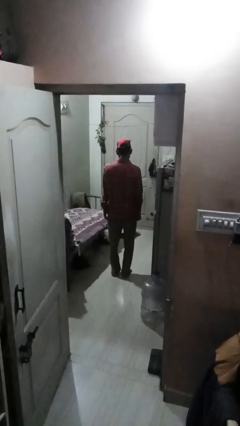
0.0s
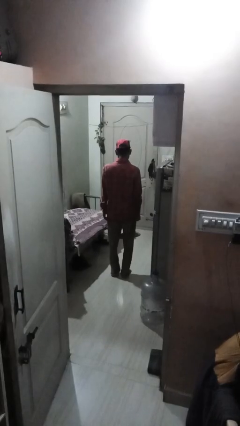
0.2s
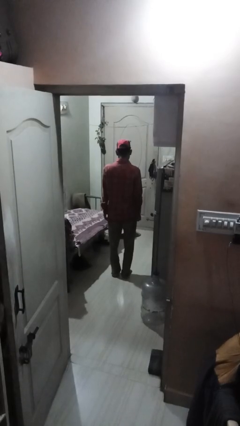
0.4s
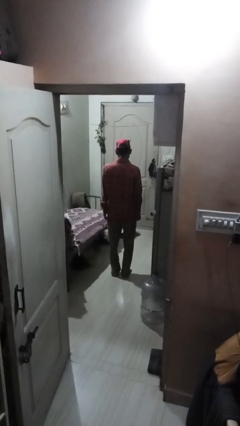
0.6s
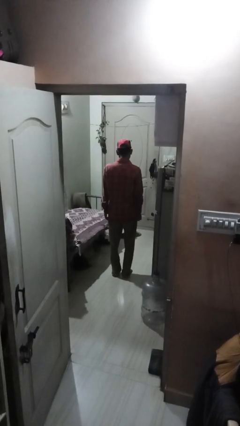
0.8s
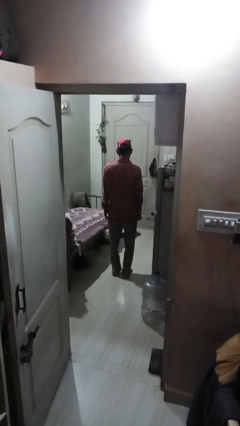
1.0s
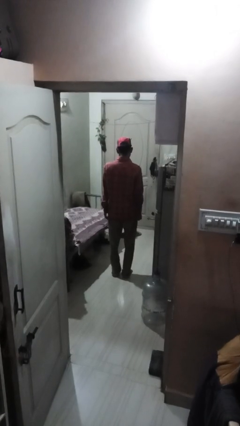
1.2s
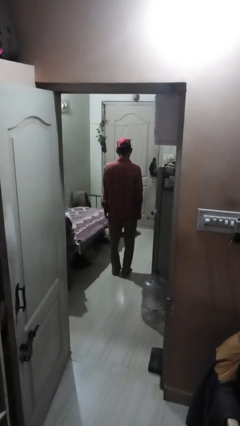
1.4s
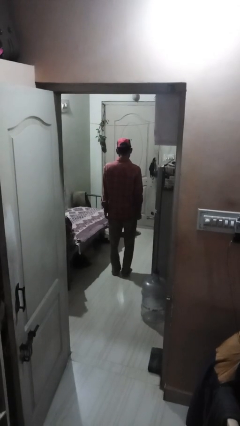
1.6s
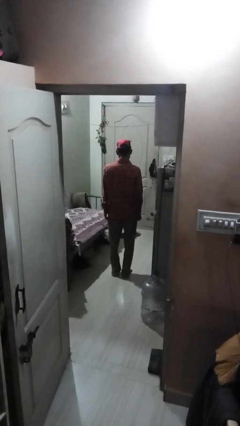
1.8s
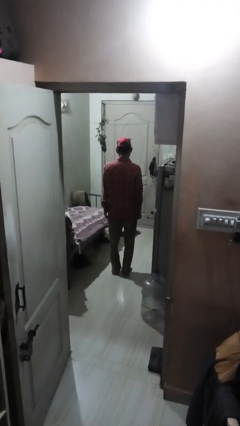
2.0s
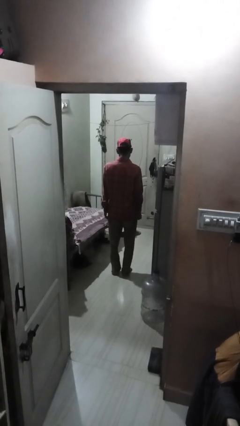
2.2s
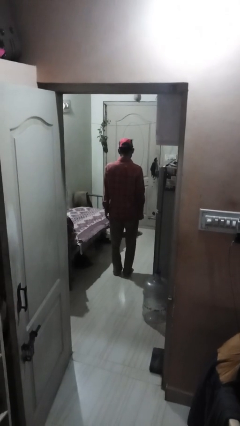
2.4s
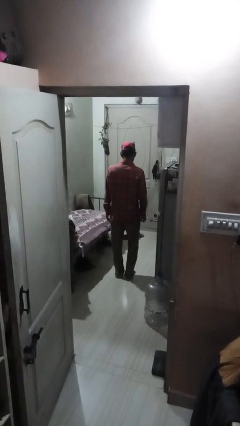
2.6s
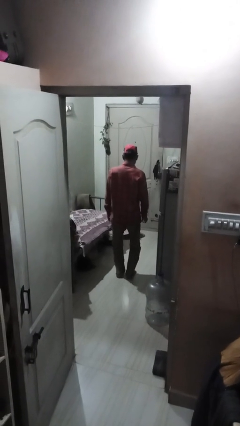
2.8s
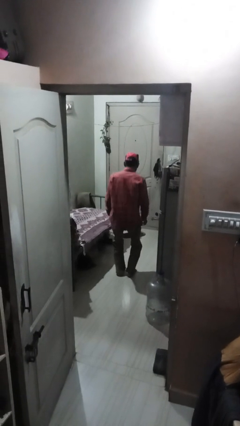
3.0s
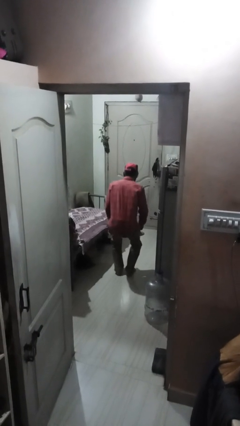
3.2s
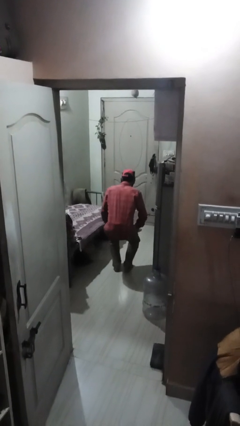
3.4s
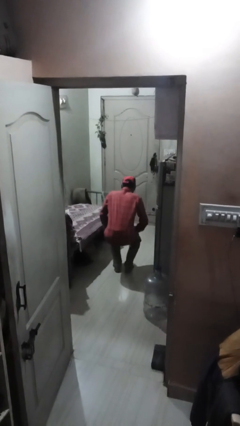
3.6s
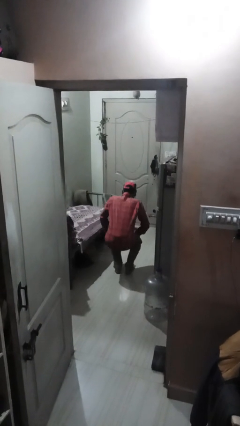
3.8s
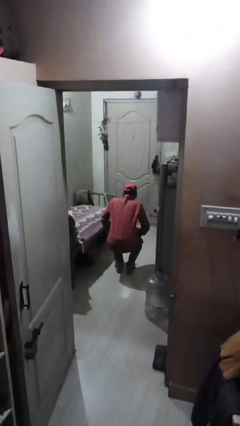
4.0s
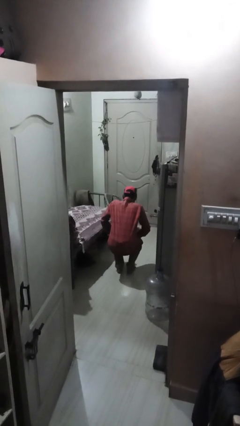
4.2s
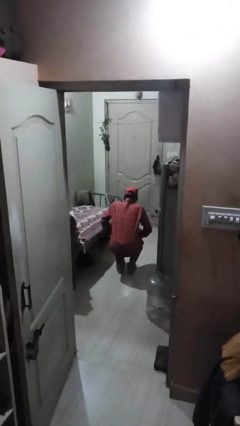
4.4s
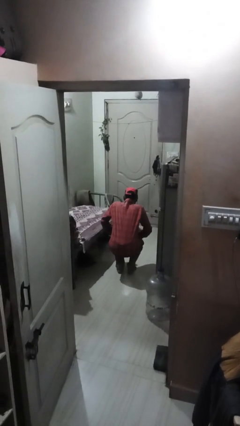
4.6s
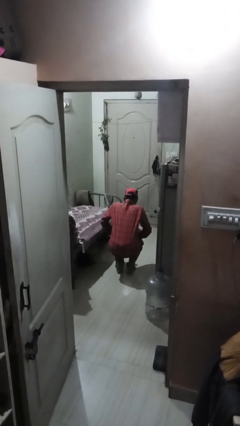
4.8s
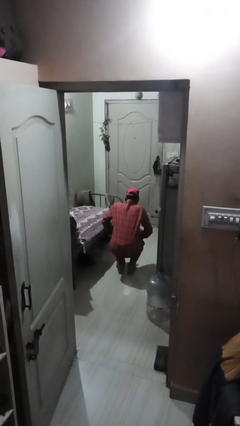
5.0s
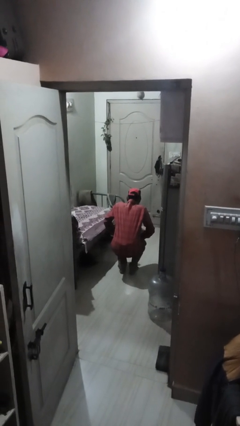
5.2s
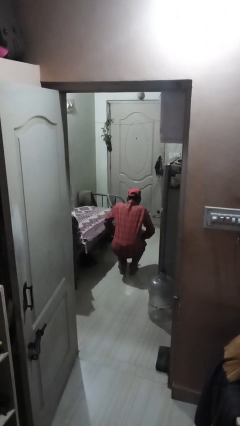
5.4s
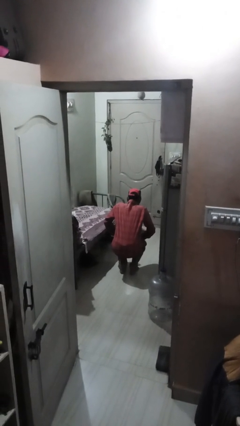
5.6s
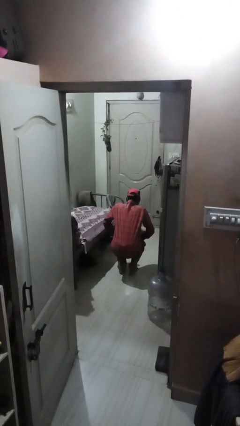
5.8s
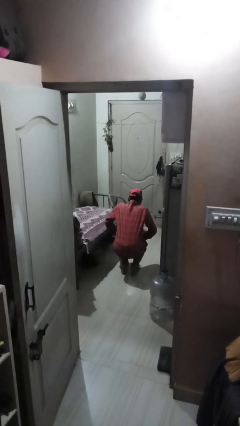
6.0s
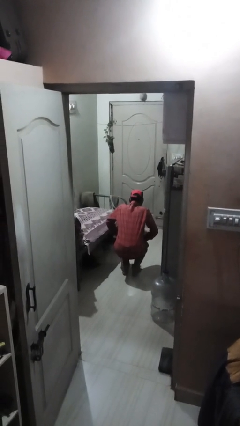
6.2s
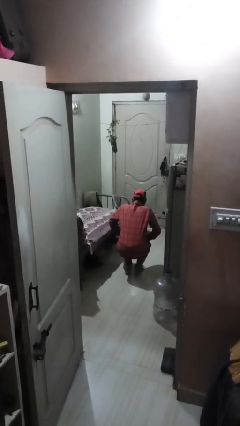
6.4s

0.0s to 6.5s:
person squats

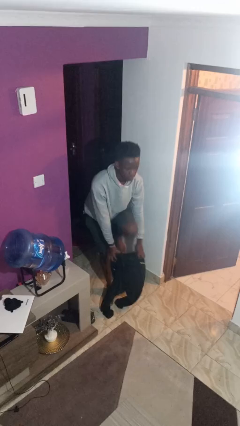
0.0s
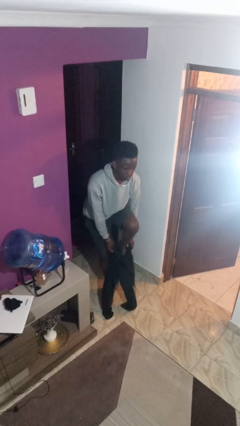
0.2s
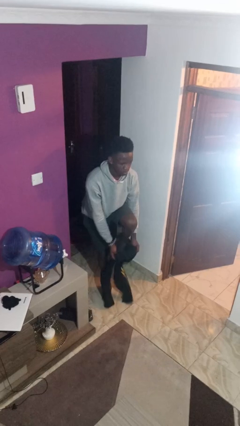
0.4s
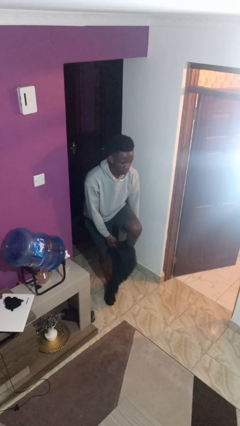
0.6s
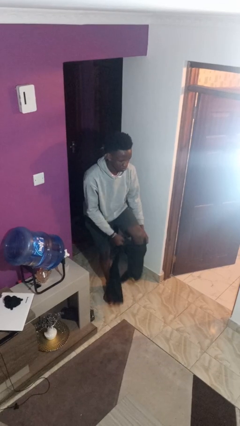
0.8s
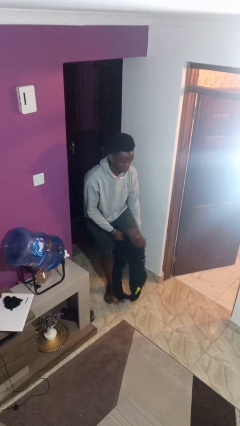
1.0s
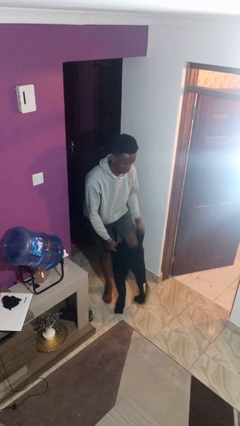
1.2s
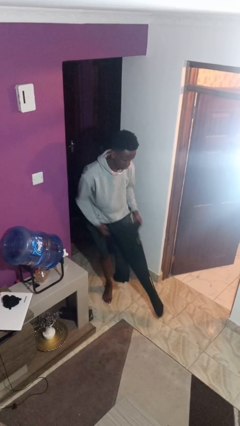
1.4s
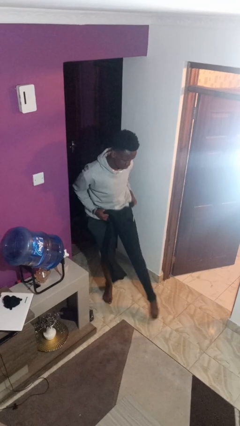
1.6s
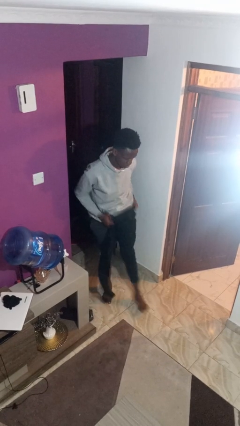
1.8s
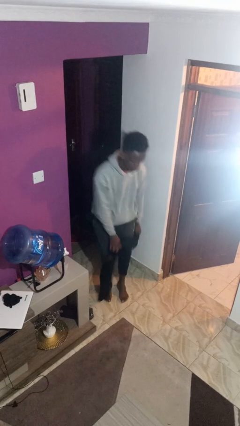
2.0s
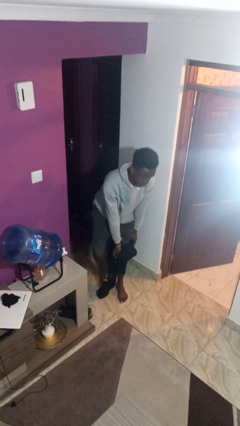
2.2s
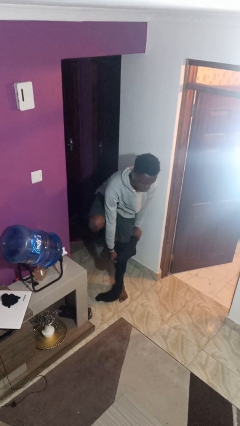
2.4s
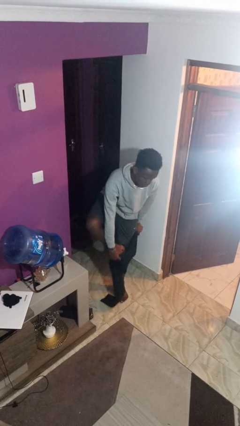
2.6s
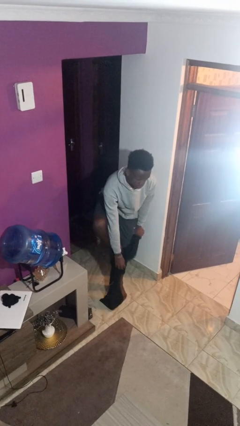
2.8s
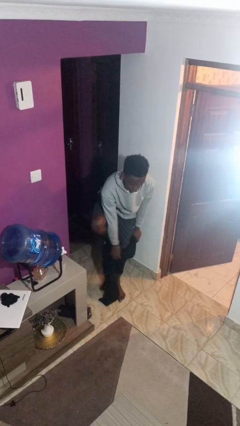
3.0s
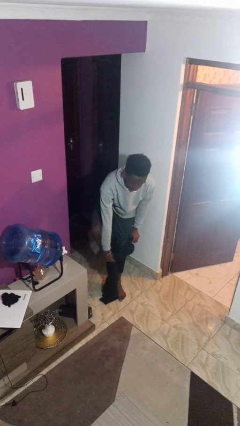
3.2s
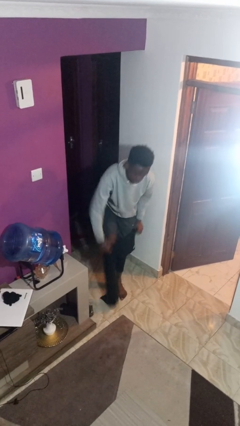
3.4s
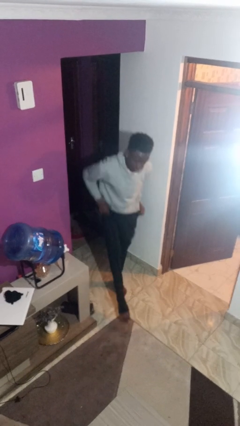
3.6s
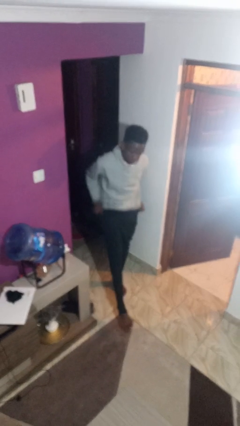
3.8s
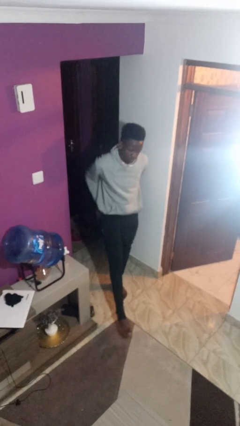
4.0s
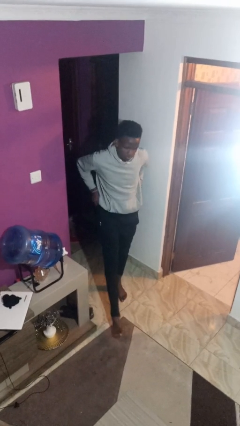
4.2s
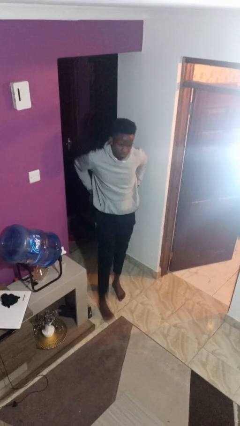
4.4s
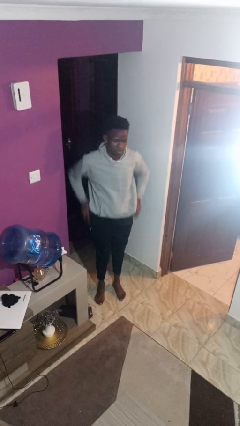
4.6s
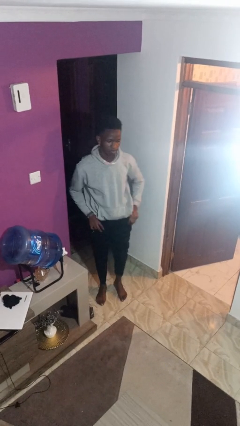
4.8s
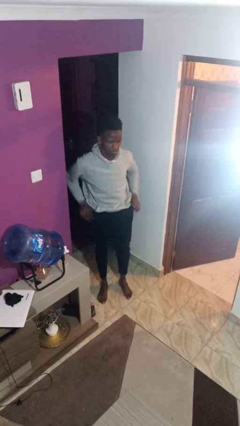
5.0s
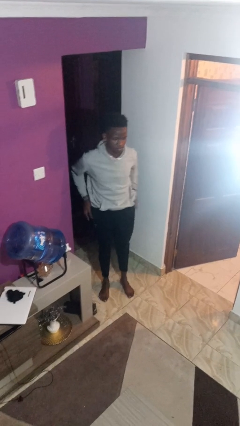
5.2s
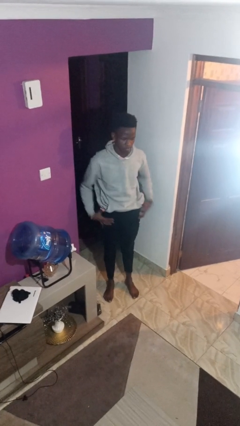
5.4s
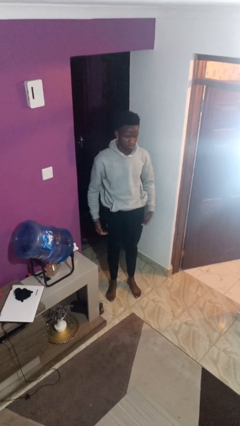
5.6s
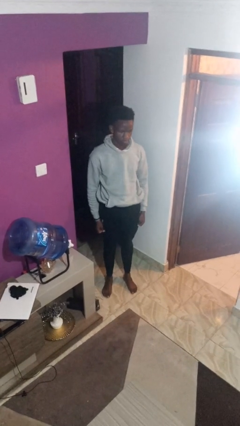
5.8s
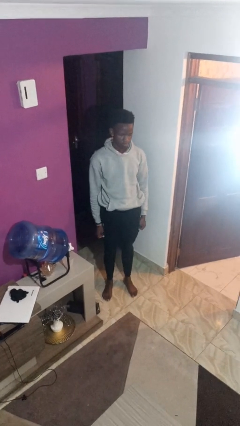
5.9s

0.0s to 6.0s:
person puts on pants

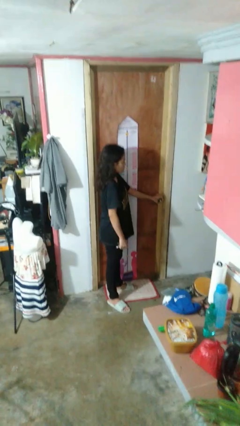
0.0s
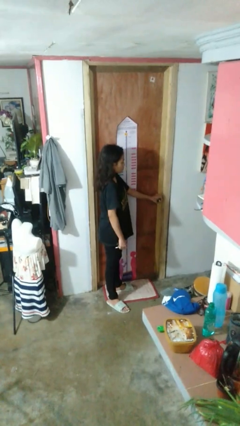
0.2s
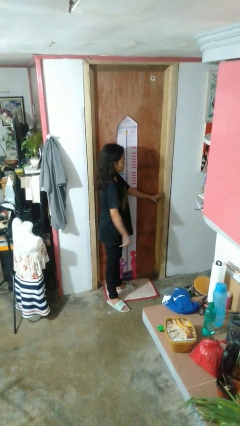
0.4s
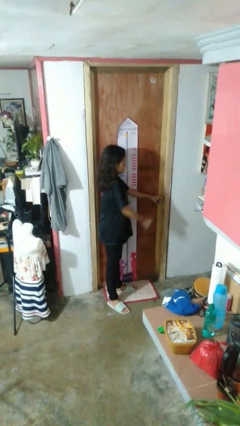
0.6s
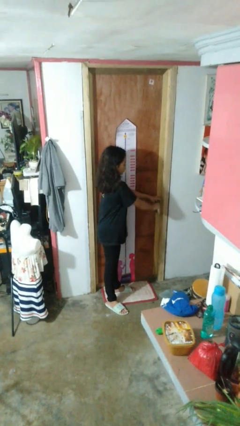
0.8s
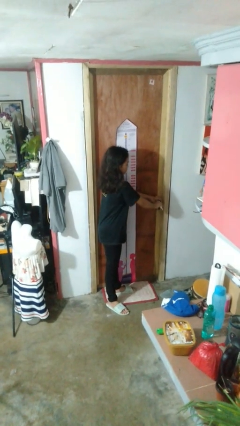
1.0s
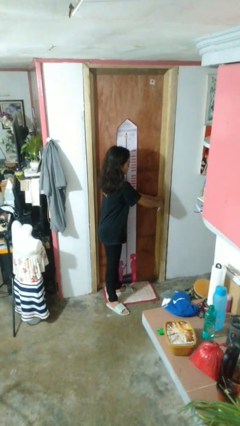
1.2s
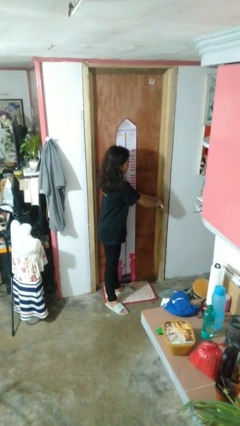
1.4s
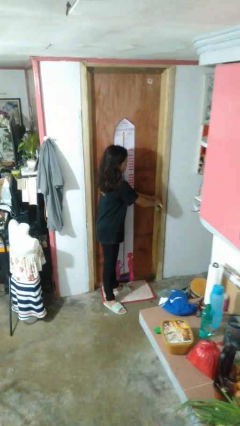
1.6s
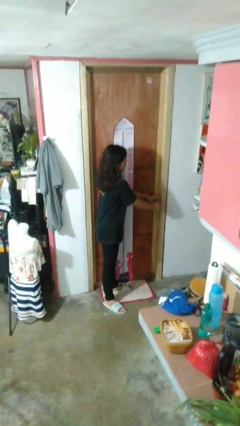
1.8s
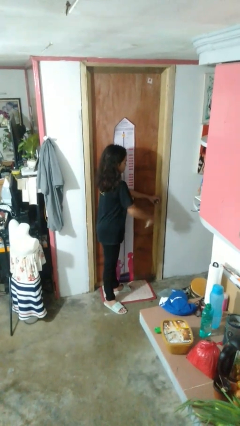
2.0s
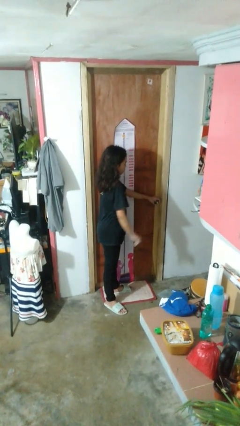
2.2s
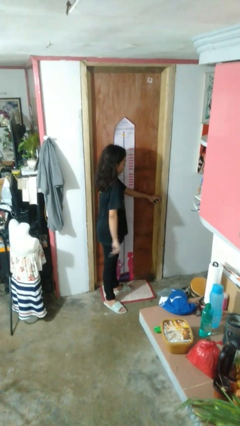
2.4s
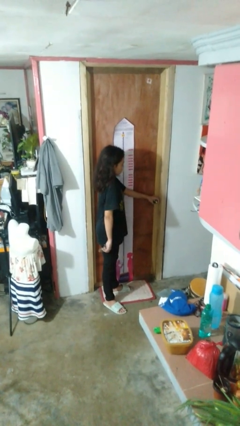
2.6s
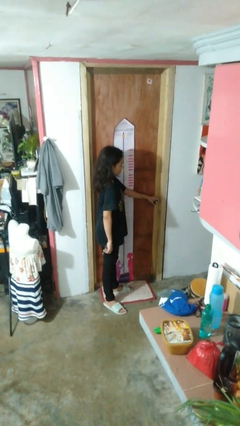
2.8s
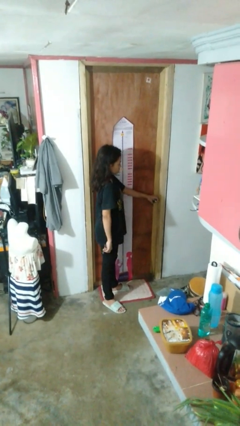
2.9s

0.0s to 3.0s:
person locks door with keys

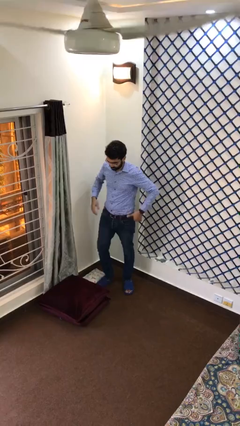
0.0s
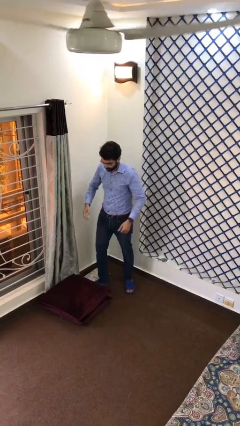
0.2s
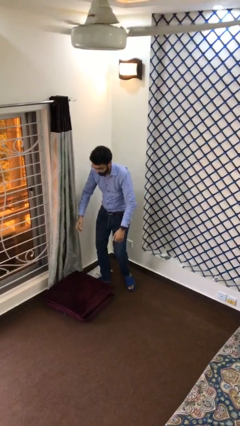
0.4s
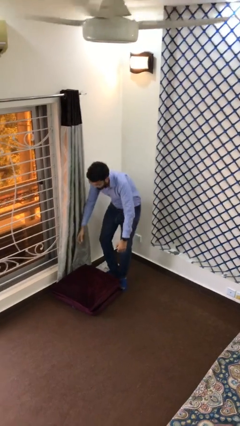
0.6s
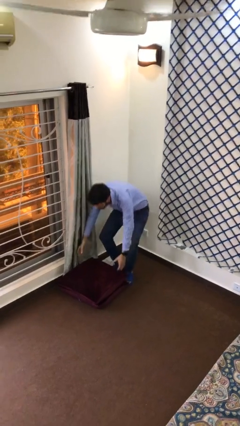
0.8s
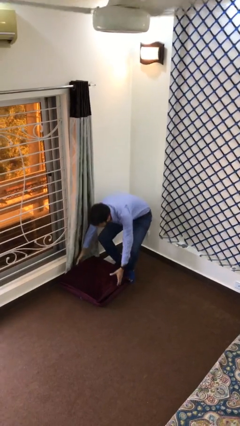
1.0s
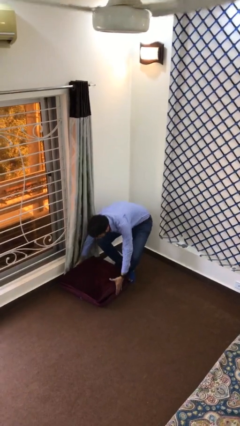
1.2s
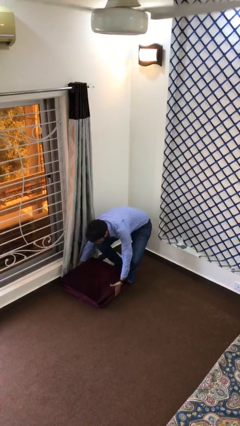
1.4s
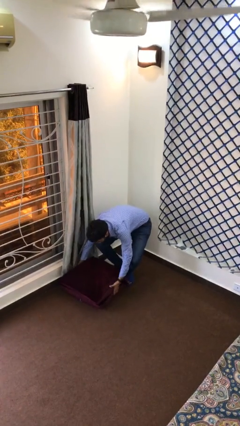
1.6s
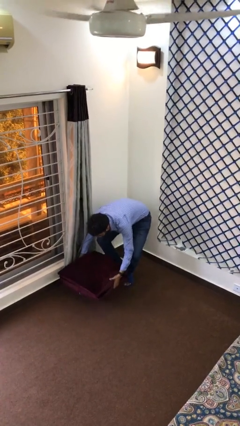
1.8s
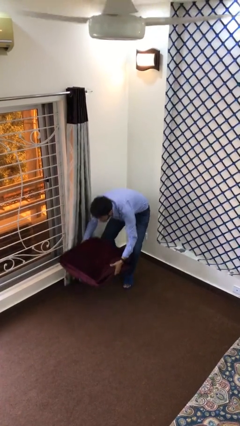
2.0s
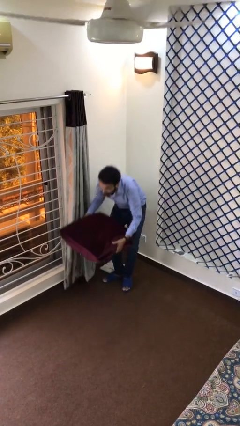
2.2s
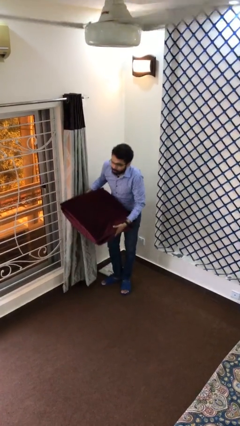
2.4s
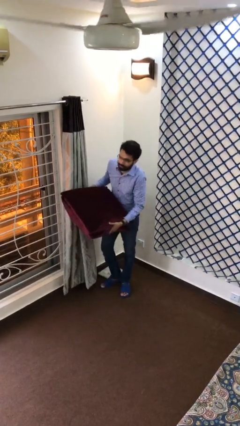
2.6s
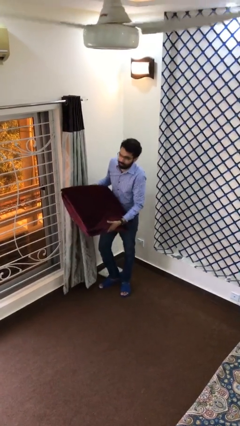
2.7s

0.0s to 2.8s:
person picks up object from floor
